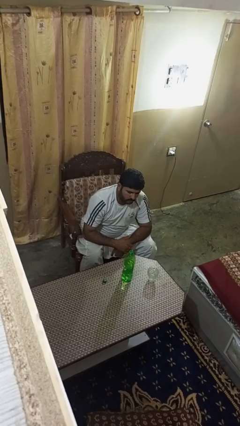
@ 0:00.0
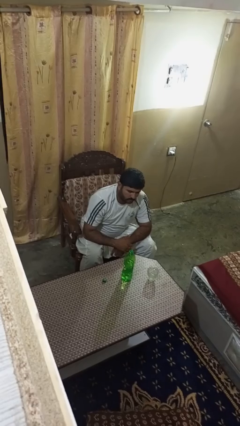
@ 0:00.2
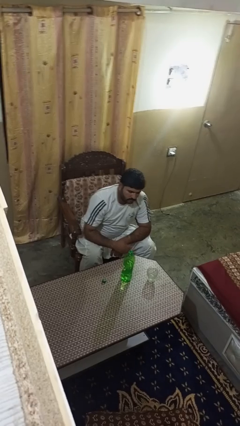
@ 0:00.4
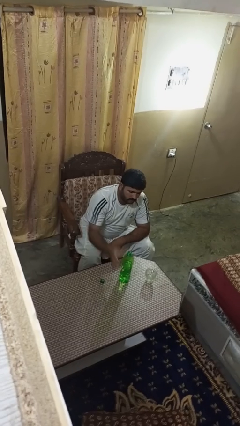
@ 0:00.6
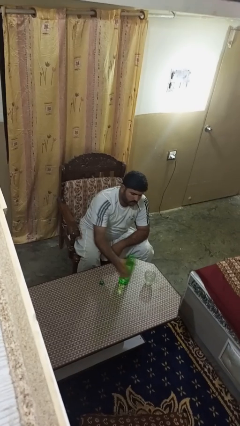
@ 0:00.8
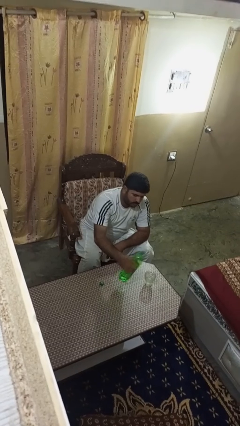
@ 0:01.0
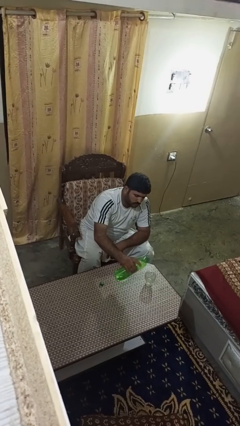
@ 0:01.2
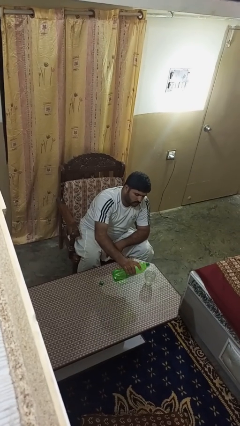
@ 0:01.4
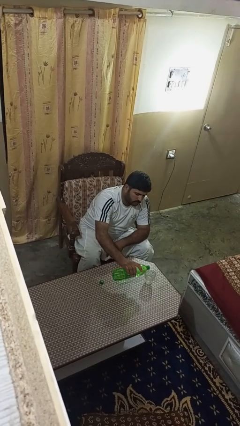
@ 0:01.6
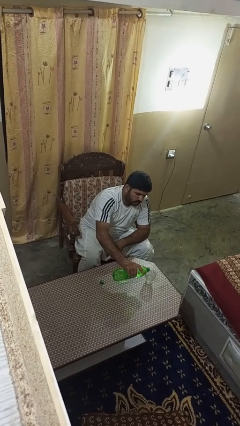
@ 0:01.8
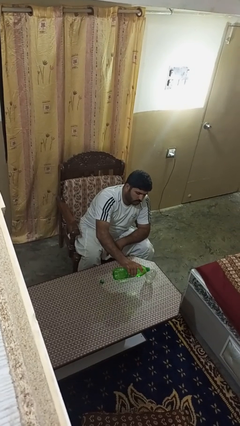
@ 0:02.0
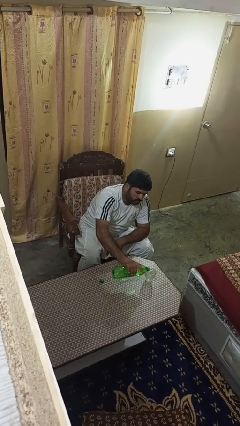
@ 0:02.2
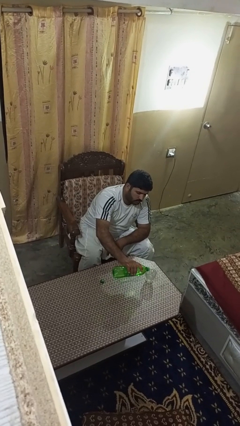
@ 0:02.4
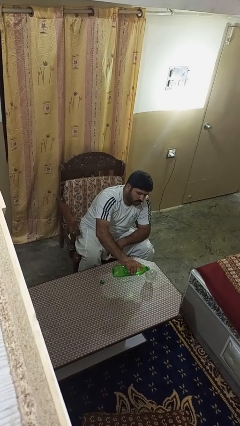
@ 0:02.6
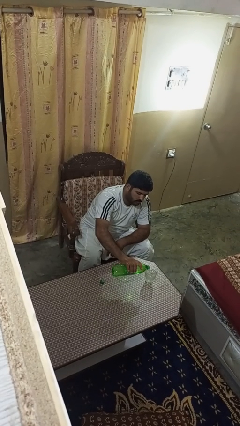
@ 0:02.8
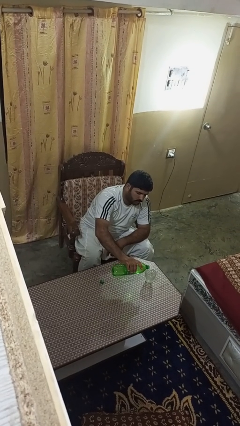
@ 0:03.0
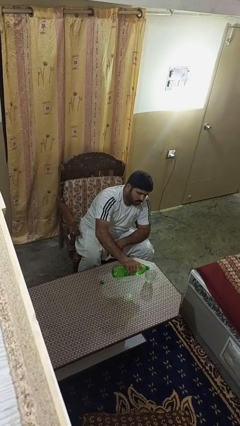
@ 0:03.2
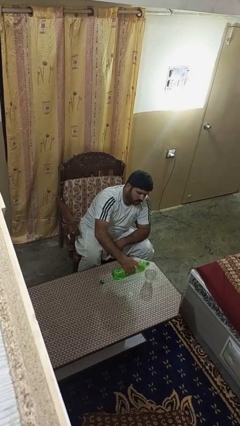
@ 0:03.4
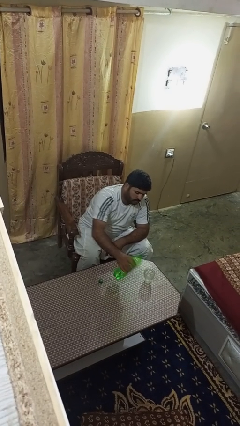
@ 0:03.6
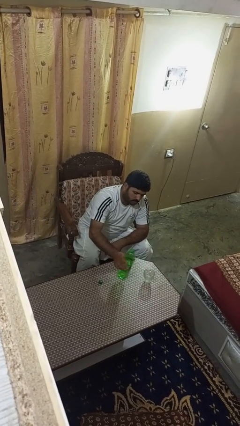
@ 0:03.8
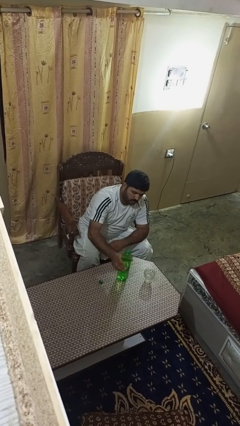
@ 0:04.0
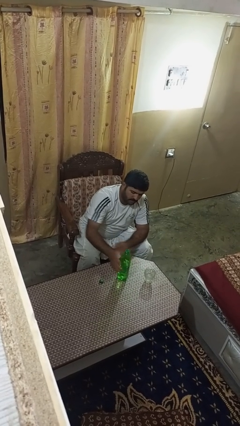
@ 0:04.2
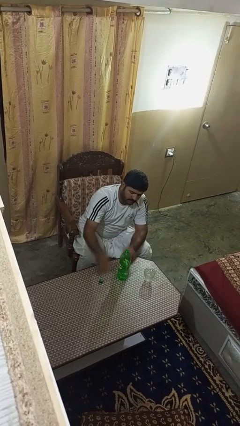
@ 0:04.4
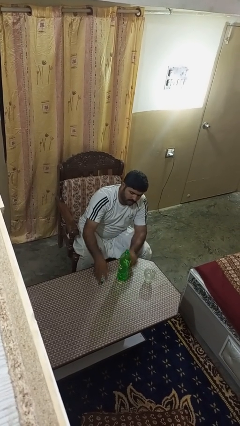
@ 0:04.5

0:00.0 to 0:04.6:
person pours liquid into cup

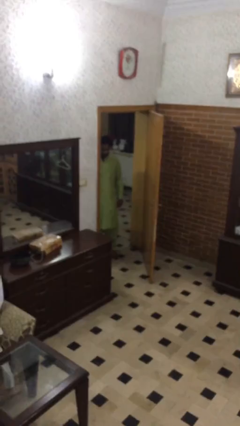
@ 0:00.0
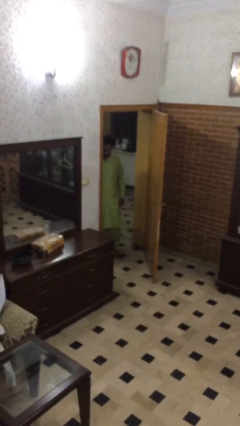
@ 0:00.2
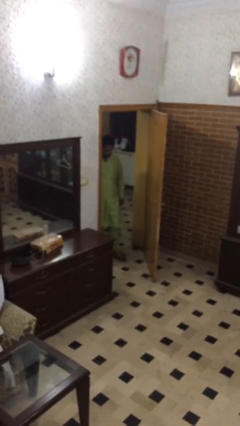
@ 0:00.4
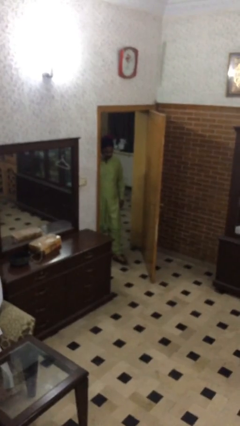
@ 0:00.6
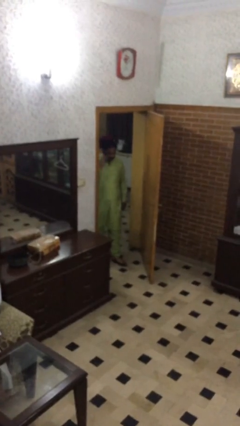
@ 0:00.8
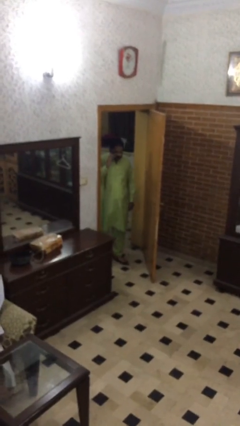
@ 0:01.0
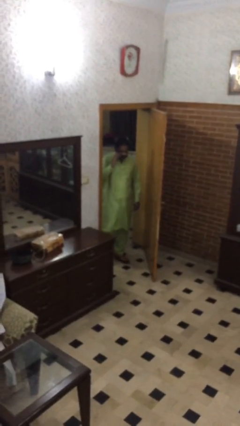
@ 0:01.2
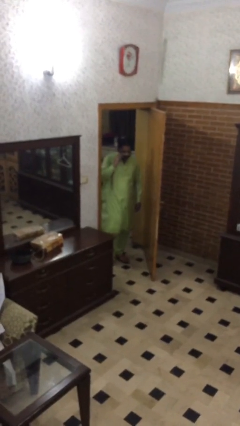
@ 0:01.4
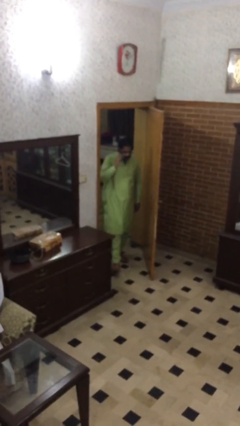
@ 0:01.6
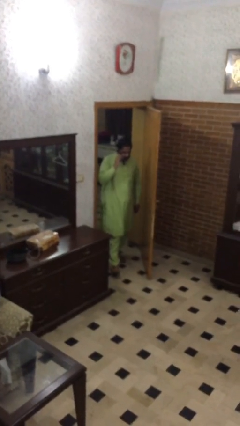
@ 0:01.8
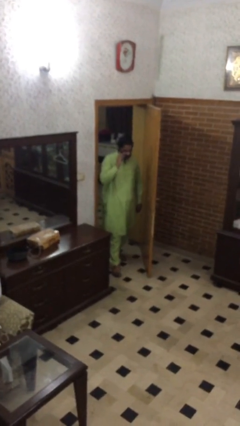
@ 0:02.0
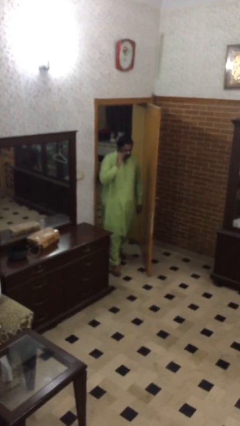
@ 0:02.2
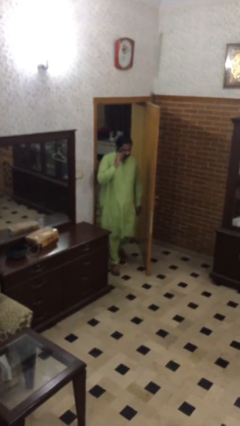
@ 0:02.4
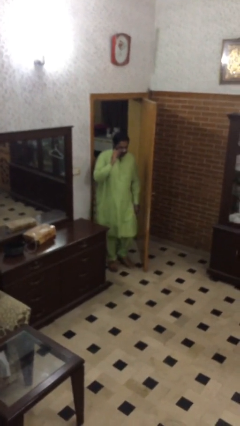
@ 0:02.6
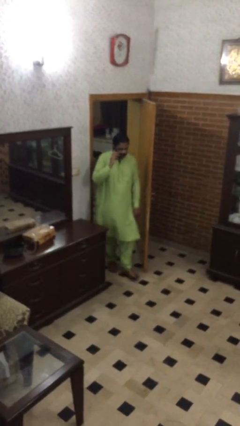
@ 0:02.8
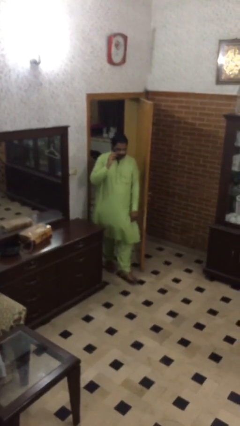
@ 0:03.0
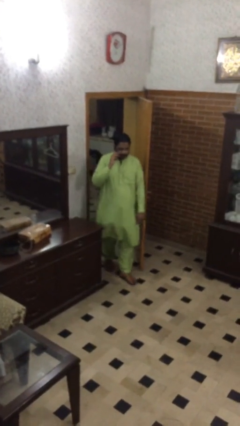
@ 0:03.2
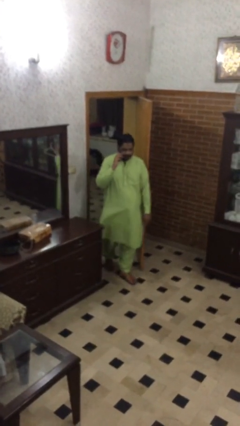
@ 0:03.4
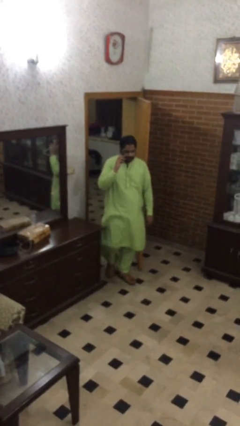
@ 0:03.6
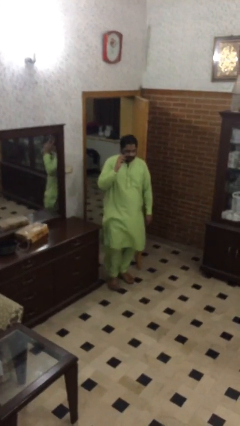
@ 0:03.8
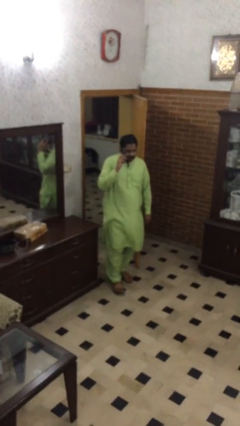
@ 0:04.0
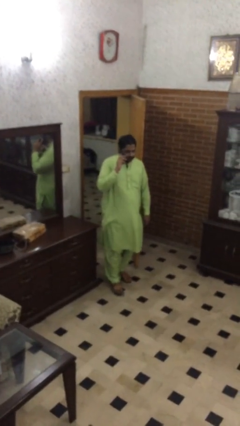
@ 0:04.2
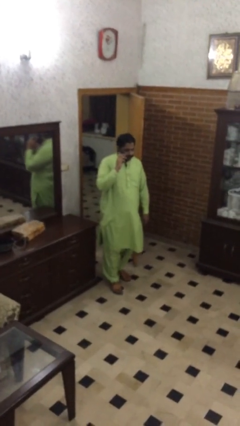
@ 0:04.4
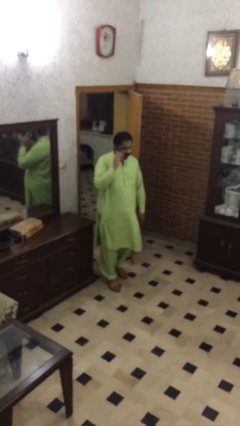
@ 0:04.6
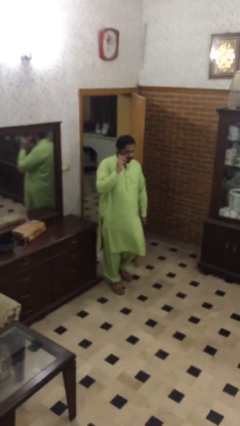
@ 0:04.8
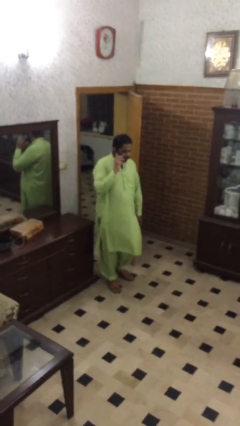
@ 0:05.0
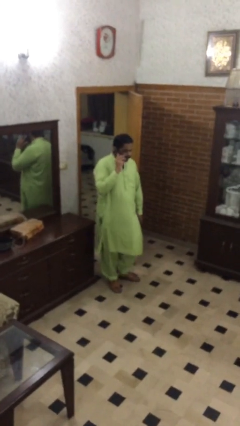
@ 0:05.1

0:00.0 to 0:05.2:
person enters scene through structure

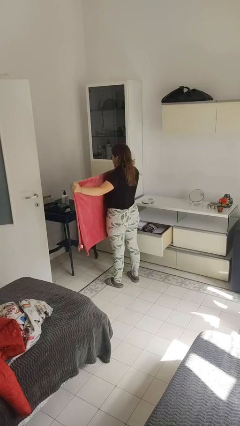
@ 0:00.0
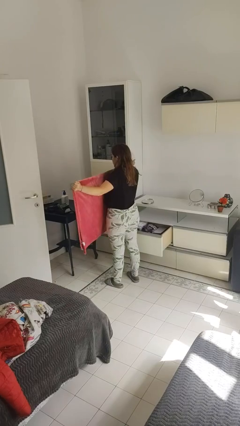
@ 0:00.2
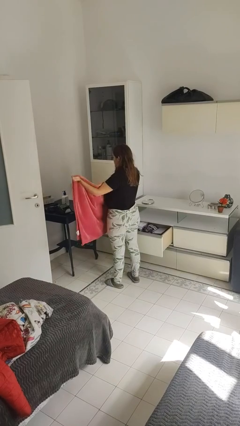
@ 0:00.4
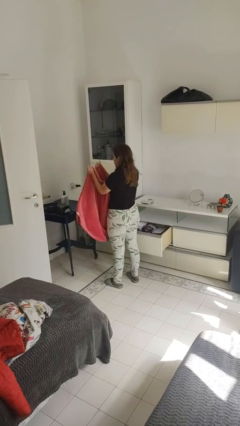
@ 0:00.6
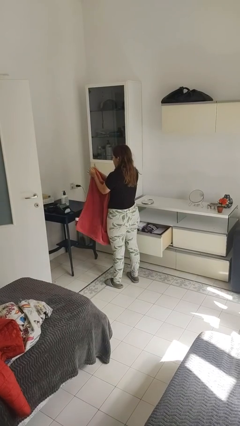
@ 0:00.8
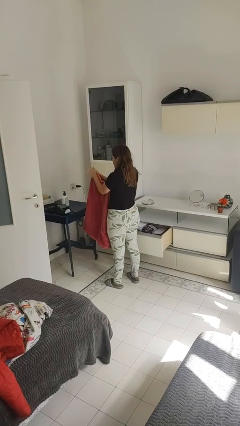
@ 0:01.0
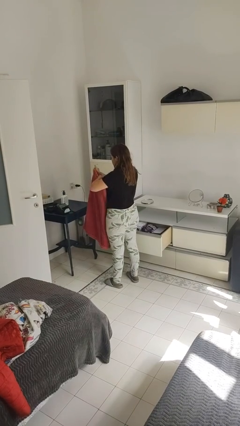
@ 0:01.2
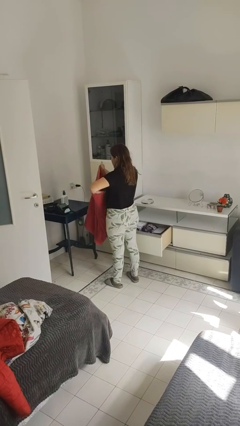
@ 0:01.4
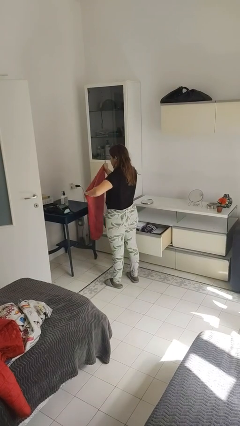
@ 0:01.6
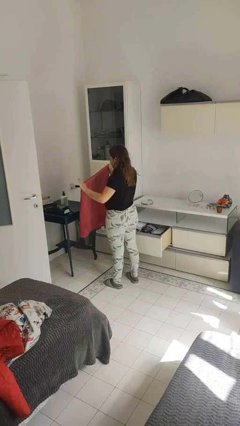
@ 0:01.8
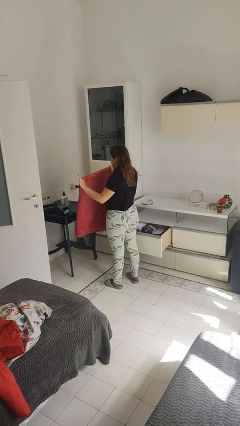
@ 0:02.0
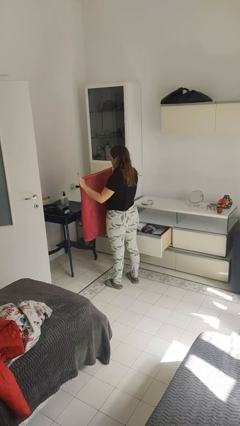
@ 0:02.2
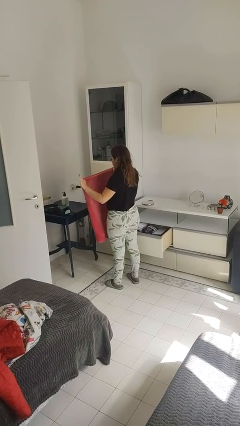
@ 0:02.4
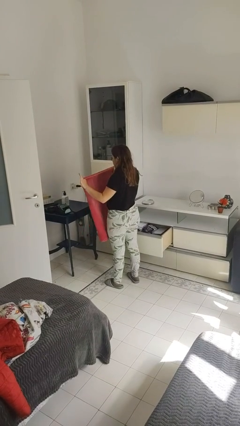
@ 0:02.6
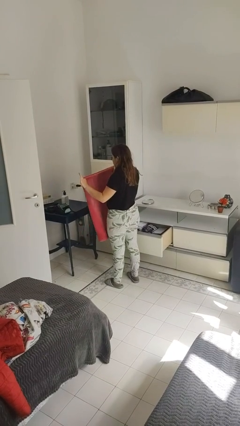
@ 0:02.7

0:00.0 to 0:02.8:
person folds blanket

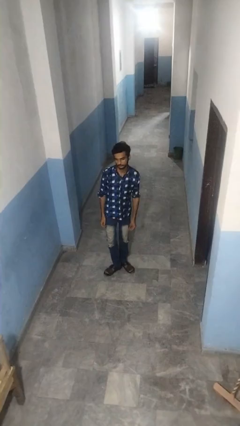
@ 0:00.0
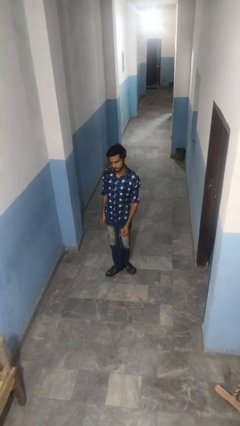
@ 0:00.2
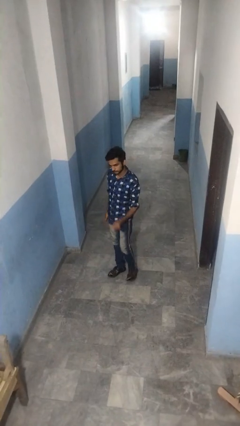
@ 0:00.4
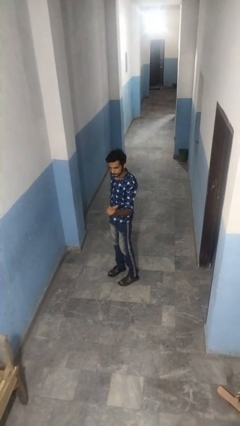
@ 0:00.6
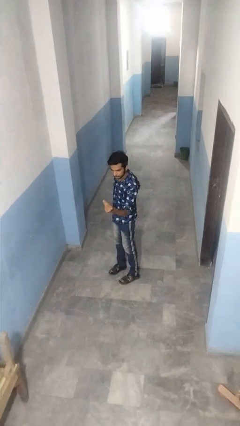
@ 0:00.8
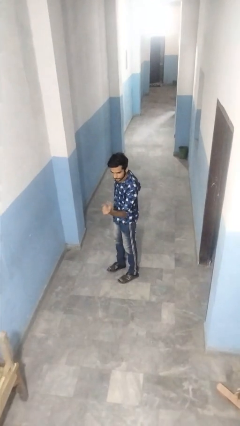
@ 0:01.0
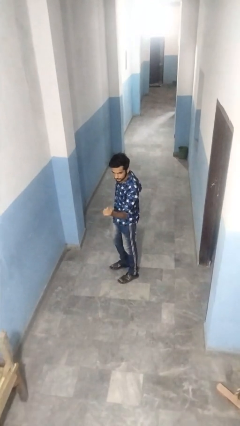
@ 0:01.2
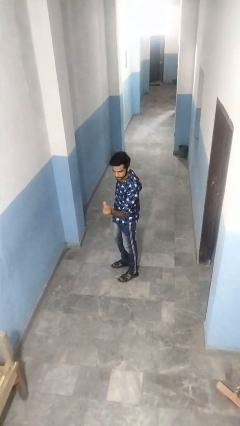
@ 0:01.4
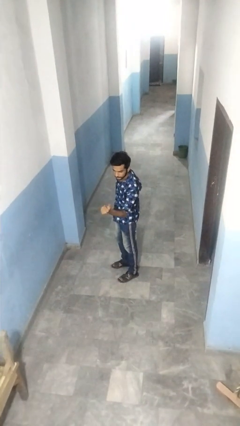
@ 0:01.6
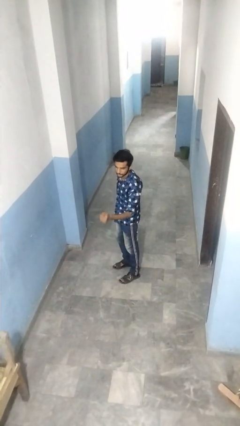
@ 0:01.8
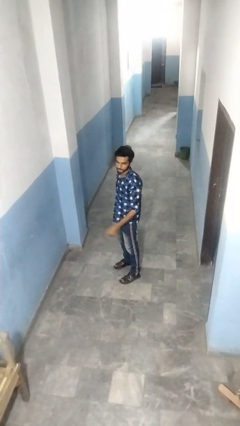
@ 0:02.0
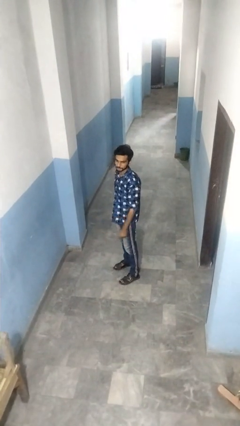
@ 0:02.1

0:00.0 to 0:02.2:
person snaps fingers

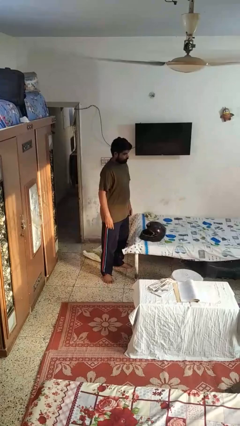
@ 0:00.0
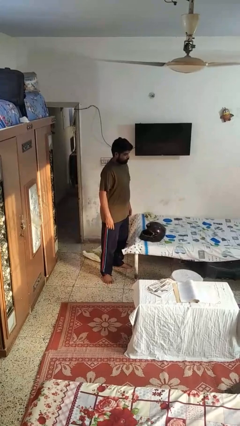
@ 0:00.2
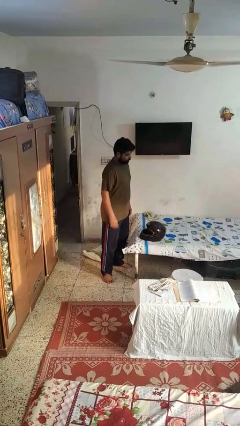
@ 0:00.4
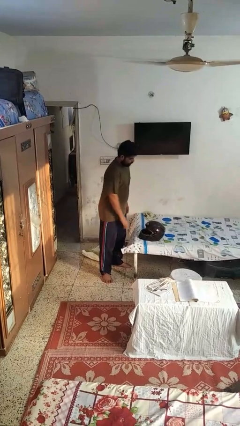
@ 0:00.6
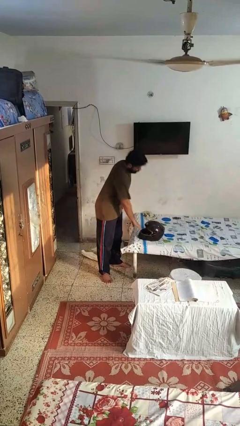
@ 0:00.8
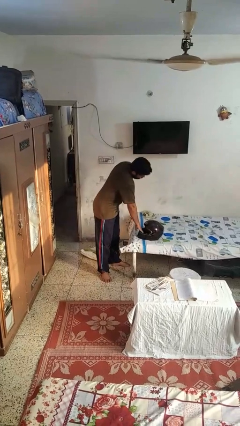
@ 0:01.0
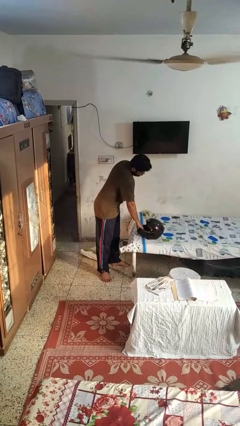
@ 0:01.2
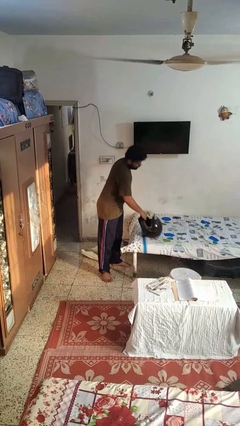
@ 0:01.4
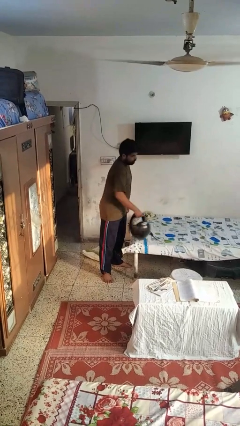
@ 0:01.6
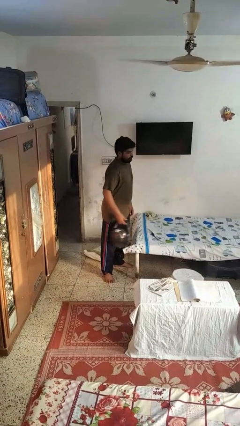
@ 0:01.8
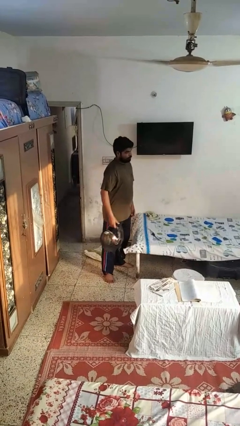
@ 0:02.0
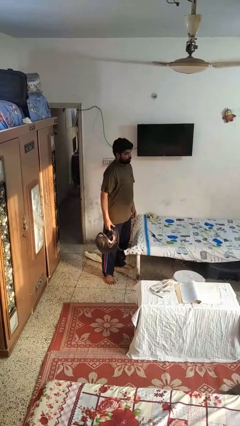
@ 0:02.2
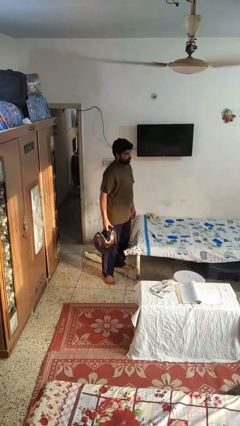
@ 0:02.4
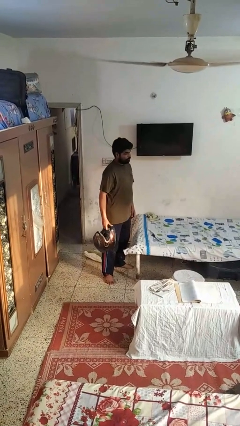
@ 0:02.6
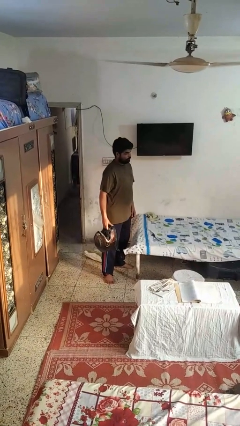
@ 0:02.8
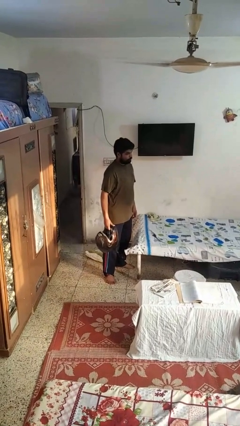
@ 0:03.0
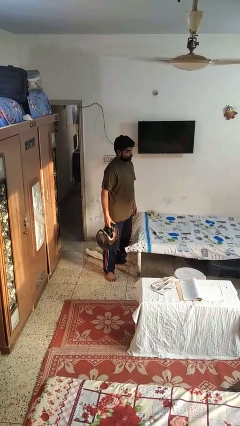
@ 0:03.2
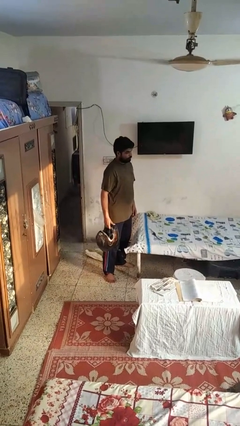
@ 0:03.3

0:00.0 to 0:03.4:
person picks up object from bed
